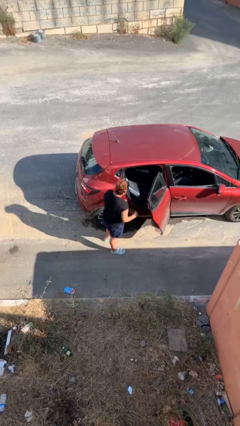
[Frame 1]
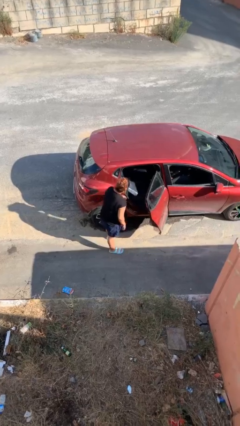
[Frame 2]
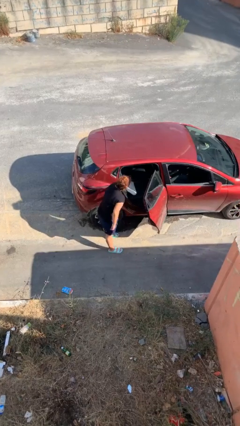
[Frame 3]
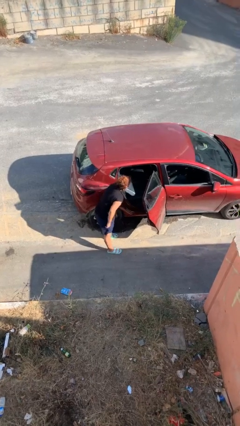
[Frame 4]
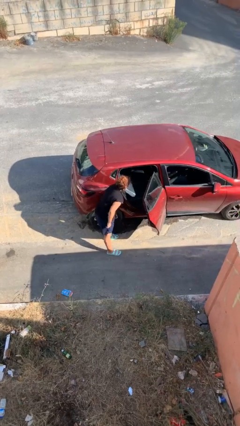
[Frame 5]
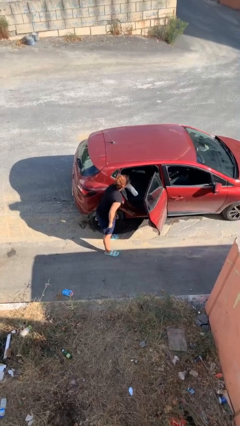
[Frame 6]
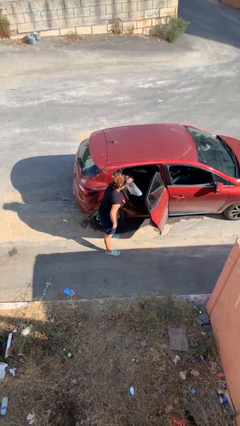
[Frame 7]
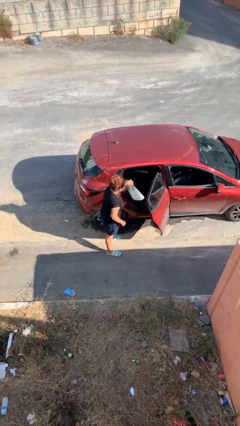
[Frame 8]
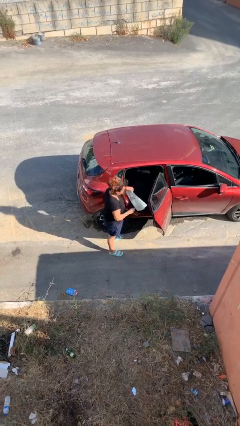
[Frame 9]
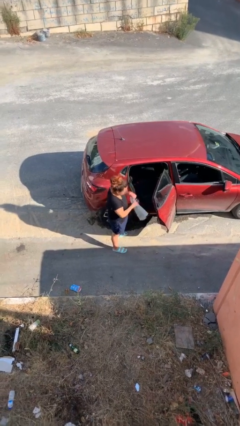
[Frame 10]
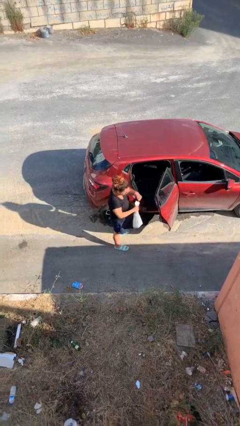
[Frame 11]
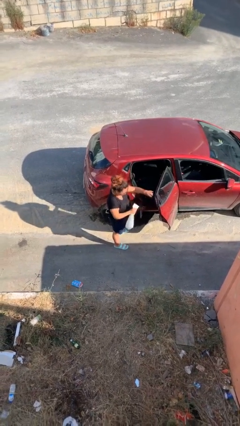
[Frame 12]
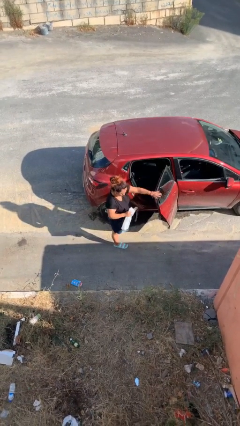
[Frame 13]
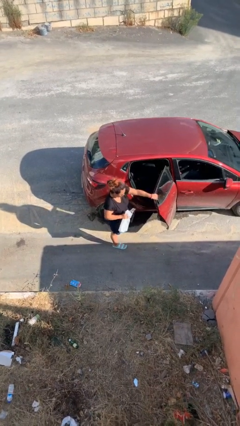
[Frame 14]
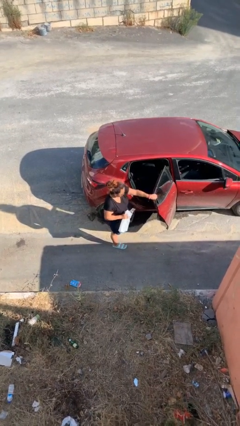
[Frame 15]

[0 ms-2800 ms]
person unloads car

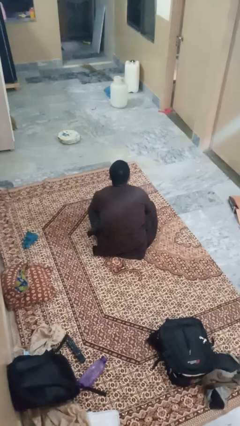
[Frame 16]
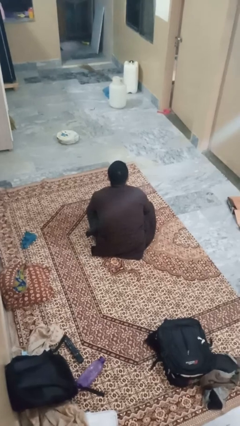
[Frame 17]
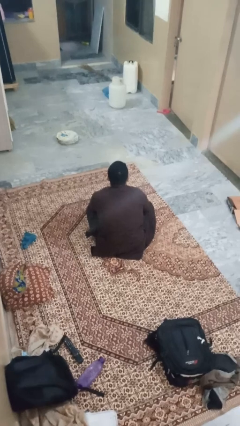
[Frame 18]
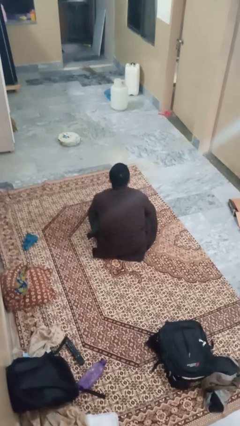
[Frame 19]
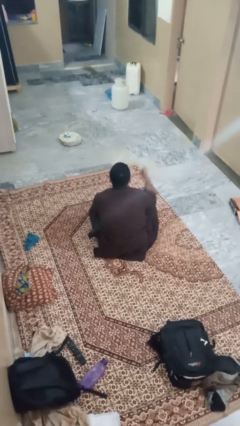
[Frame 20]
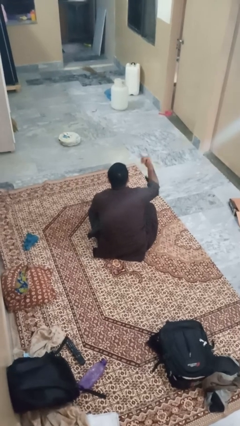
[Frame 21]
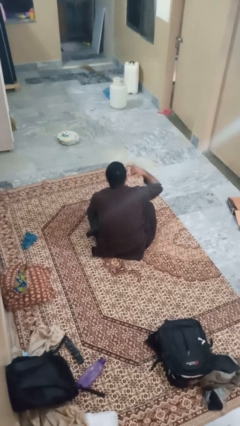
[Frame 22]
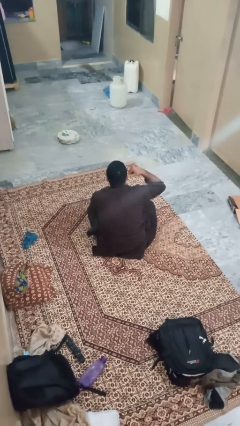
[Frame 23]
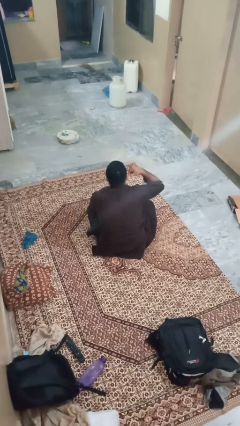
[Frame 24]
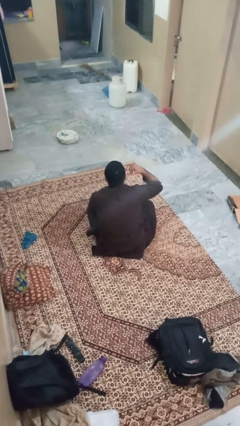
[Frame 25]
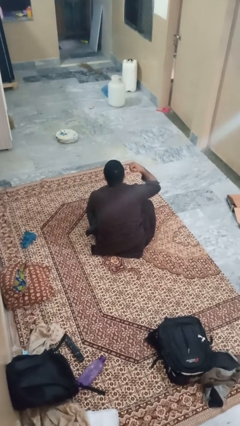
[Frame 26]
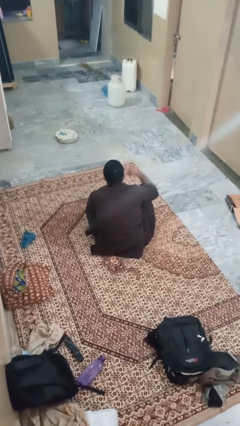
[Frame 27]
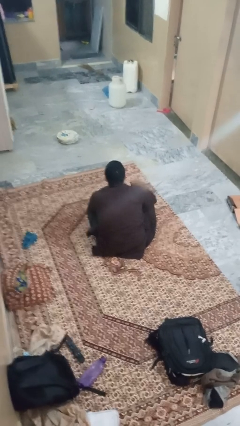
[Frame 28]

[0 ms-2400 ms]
person gestures call me

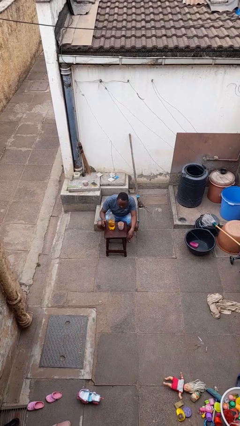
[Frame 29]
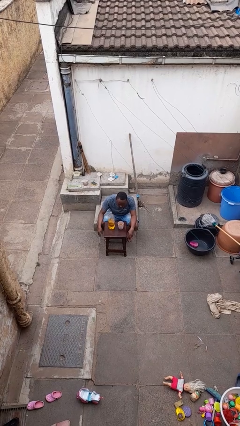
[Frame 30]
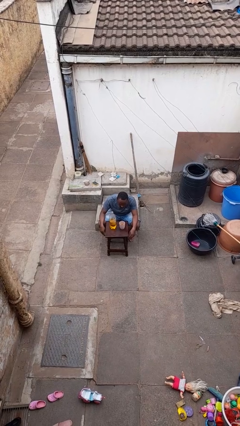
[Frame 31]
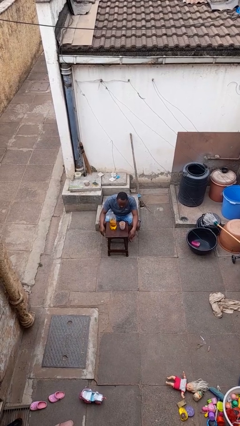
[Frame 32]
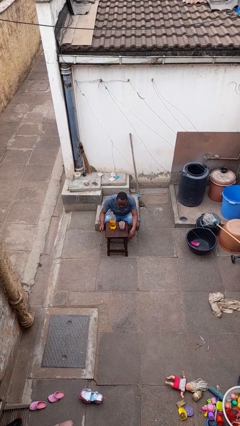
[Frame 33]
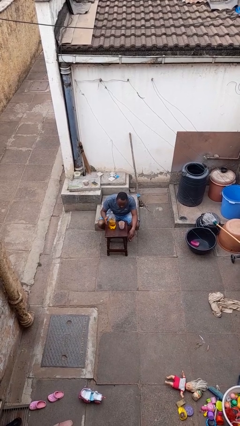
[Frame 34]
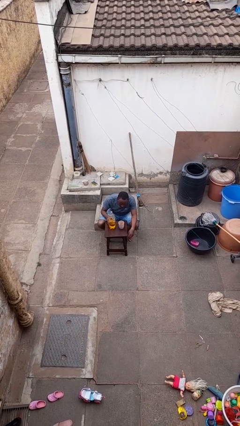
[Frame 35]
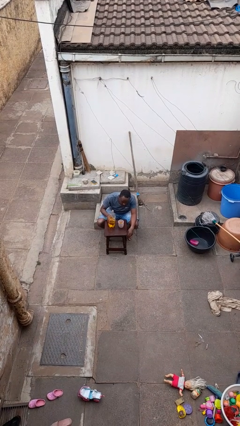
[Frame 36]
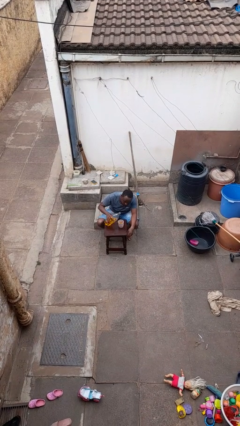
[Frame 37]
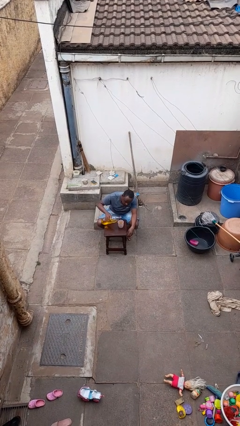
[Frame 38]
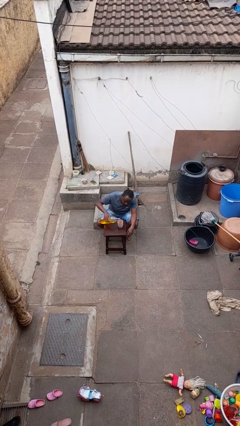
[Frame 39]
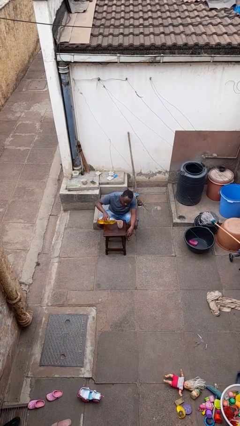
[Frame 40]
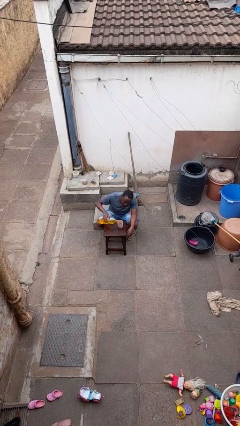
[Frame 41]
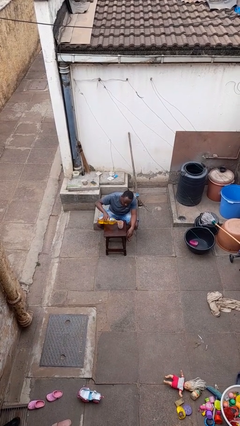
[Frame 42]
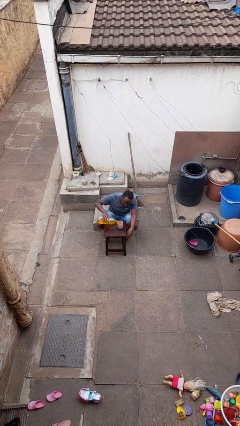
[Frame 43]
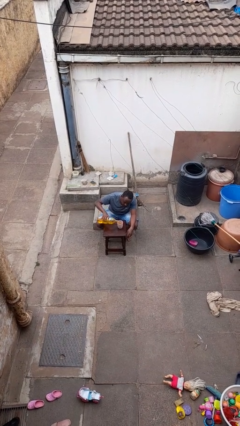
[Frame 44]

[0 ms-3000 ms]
person pours liquid into cup

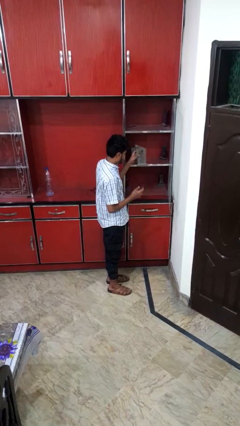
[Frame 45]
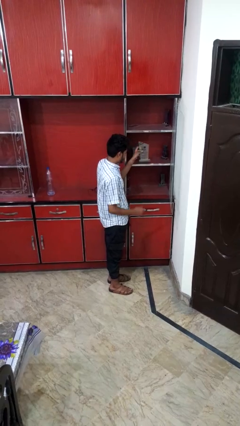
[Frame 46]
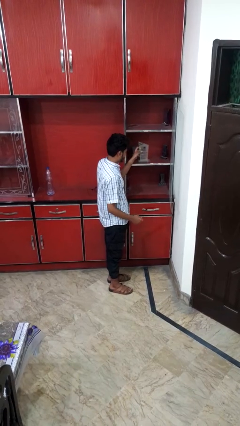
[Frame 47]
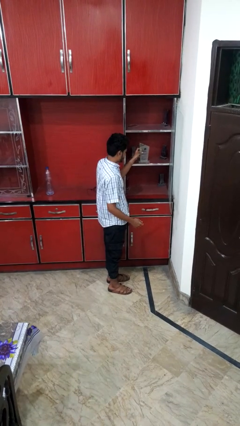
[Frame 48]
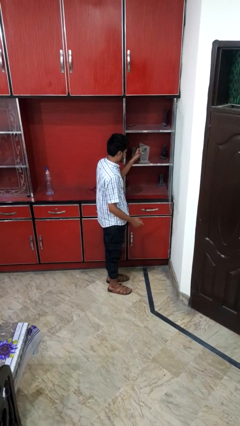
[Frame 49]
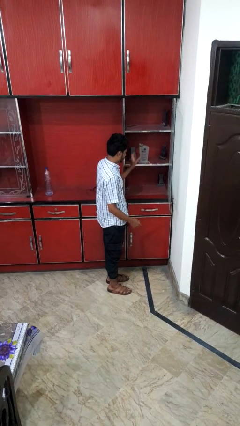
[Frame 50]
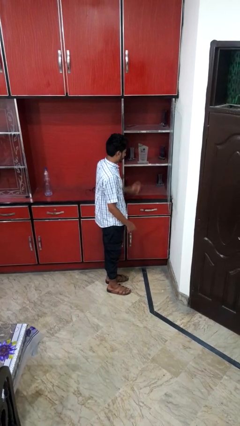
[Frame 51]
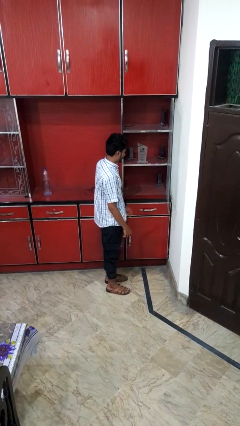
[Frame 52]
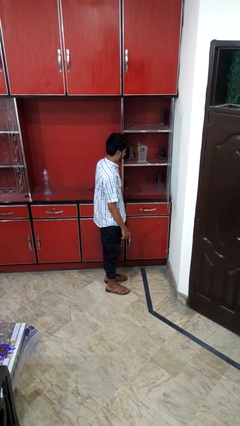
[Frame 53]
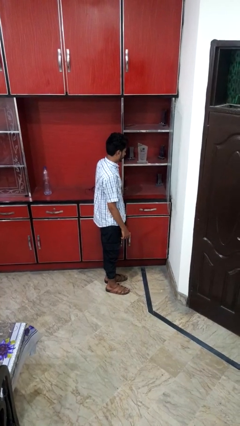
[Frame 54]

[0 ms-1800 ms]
person puts down object into cabinet

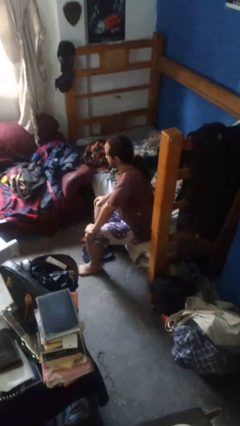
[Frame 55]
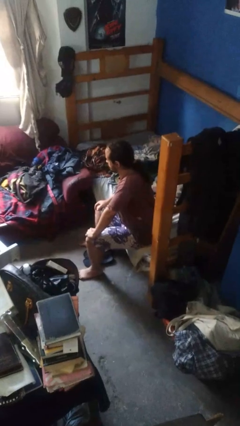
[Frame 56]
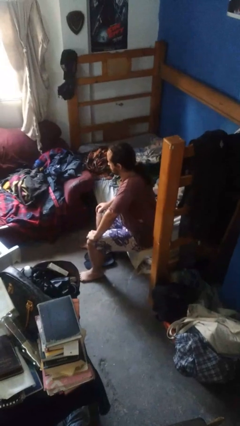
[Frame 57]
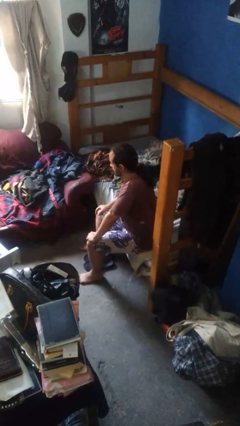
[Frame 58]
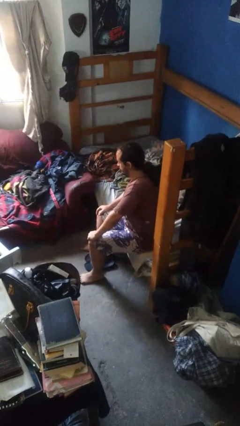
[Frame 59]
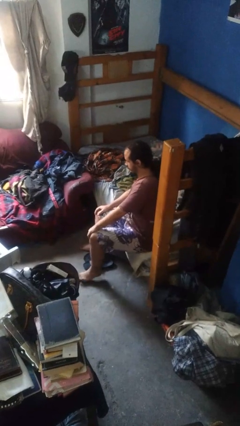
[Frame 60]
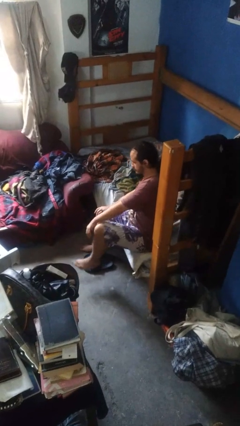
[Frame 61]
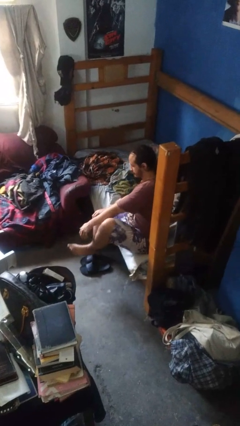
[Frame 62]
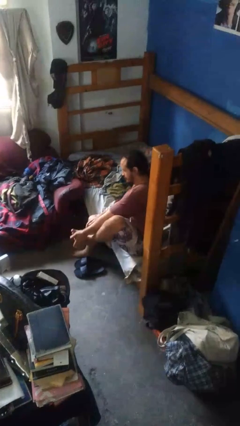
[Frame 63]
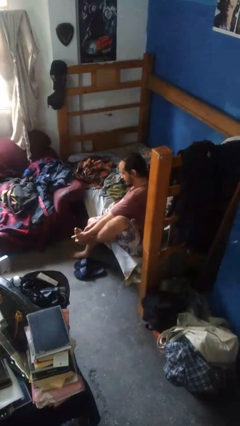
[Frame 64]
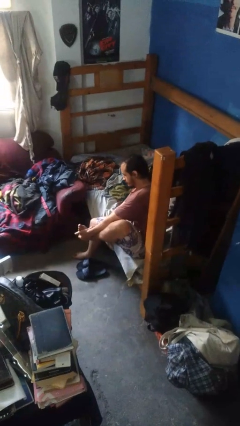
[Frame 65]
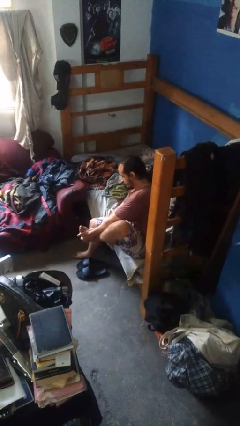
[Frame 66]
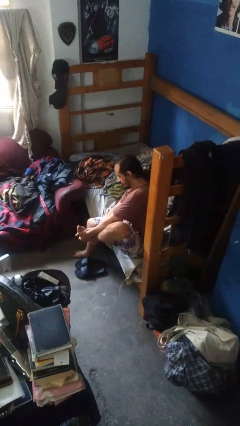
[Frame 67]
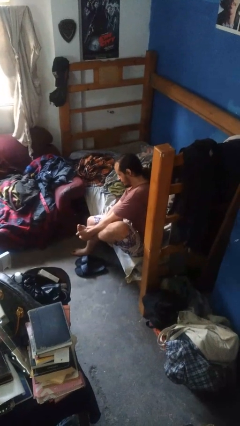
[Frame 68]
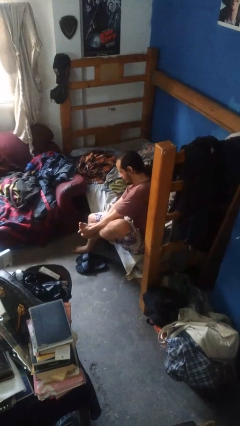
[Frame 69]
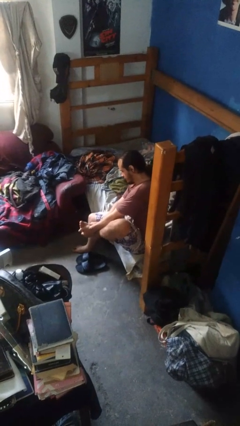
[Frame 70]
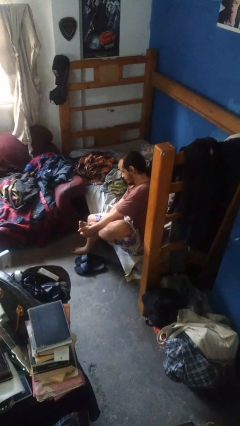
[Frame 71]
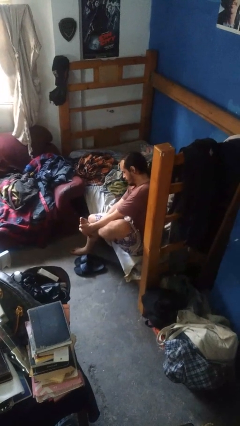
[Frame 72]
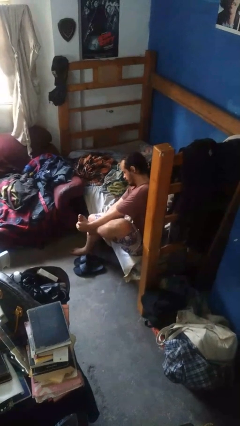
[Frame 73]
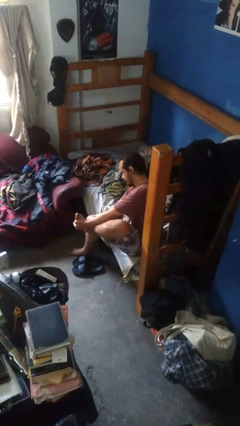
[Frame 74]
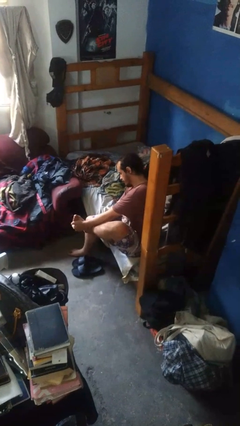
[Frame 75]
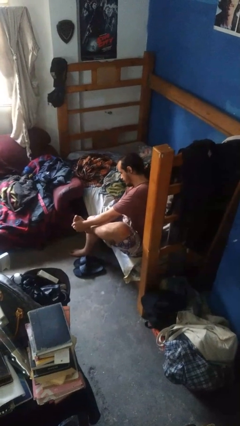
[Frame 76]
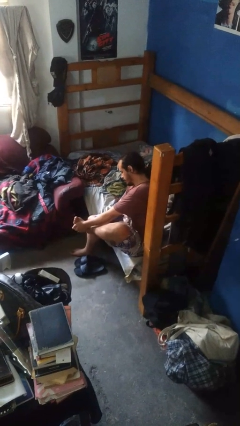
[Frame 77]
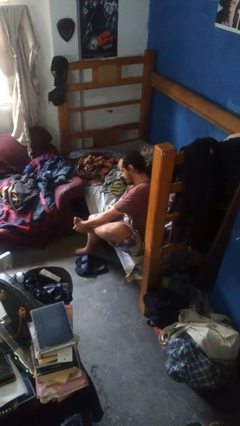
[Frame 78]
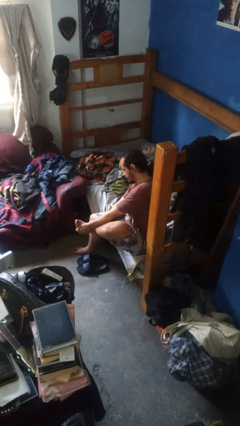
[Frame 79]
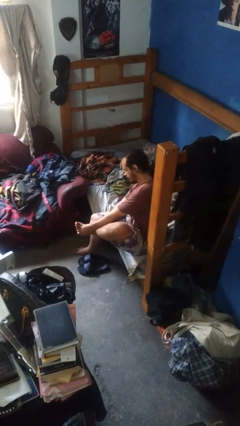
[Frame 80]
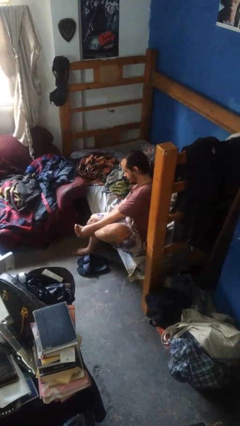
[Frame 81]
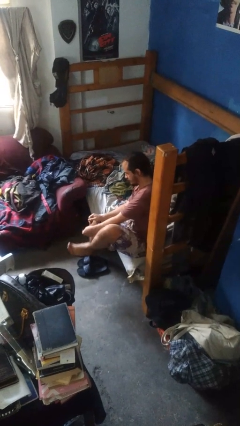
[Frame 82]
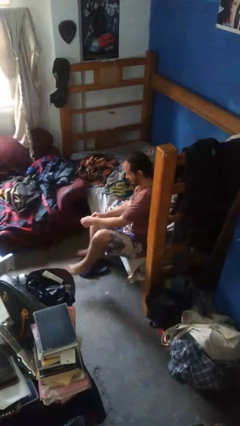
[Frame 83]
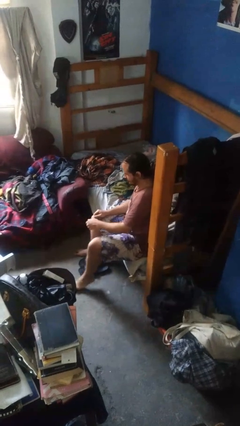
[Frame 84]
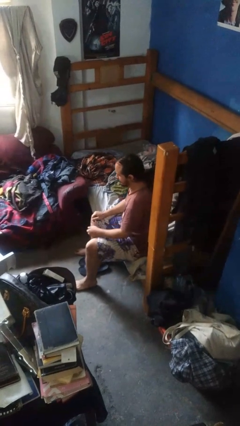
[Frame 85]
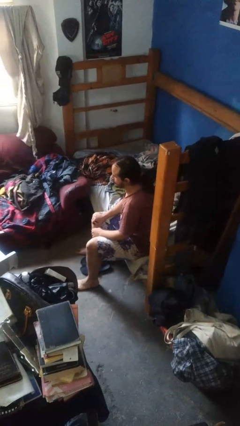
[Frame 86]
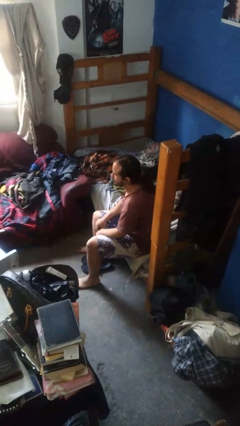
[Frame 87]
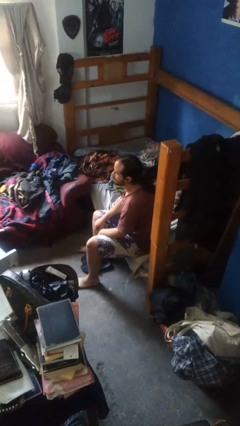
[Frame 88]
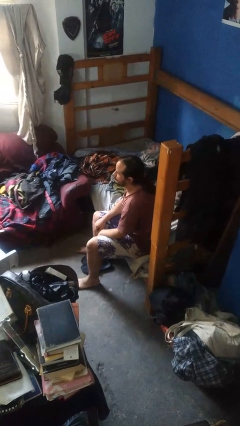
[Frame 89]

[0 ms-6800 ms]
person rubs foot

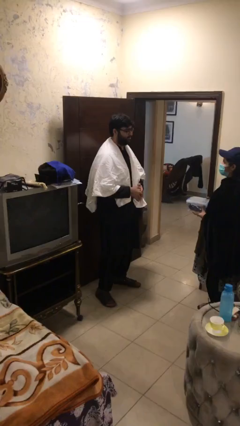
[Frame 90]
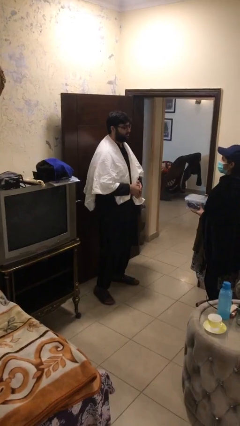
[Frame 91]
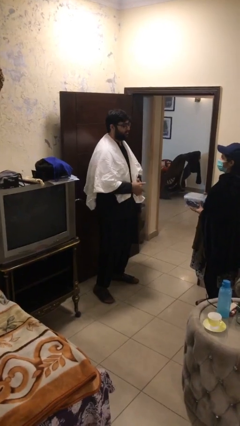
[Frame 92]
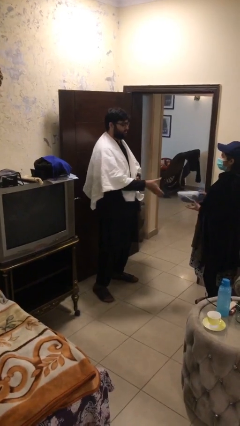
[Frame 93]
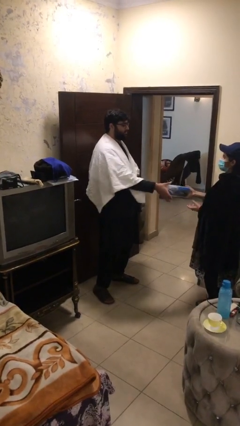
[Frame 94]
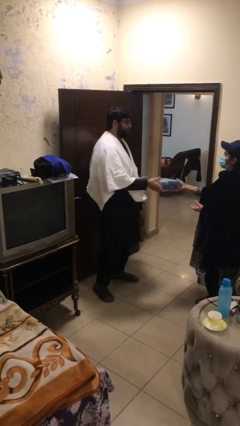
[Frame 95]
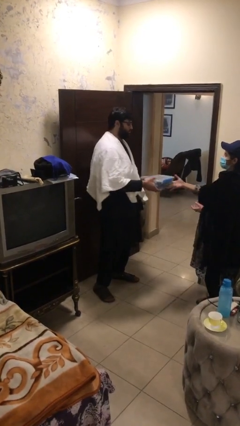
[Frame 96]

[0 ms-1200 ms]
person transfers object to person
